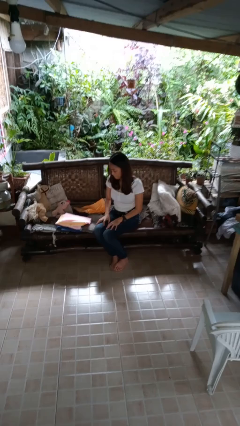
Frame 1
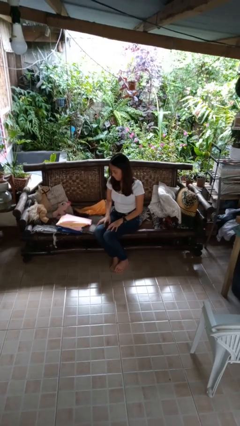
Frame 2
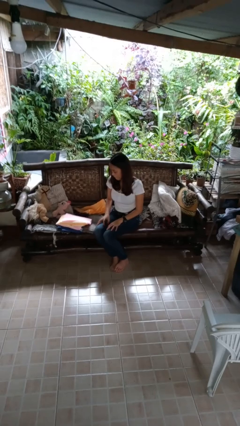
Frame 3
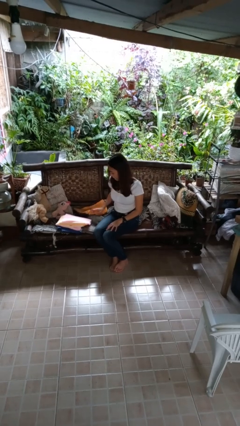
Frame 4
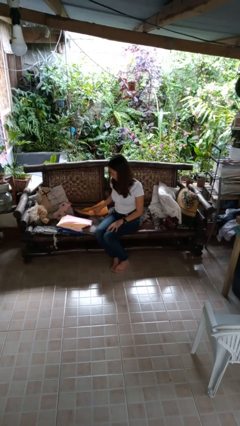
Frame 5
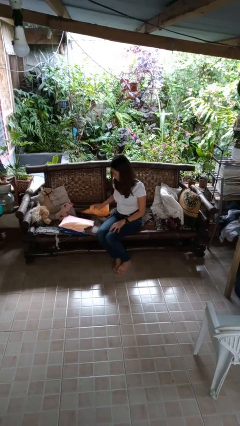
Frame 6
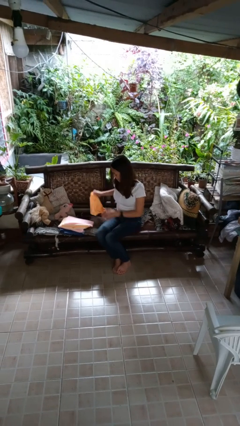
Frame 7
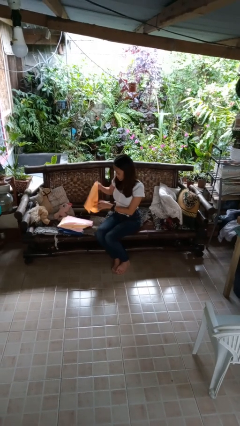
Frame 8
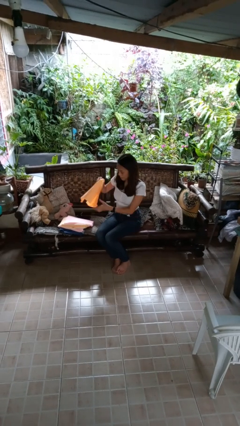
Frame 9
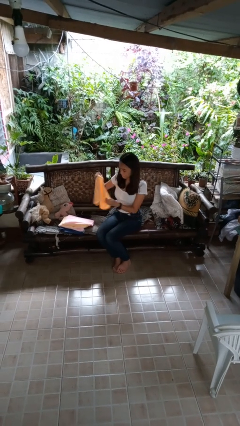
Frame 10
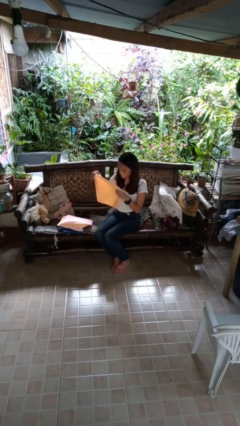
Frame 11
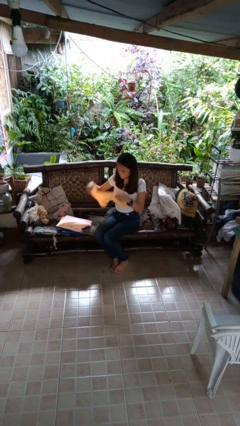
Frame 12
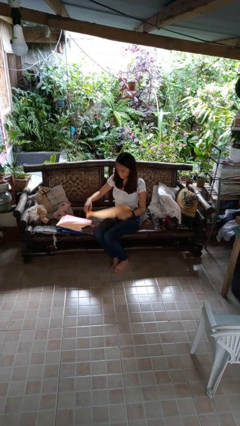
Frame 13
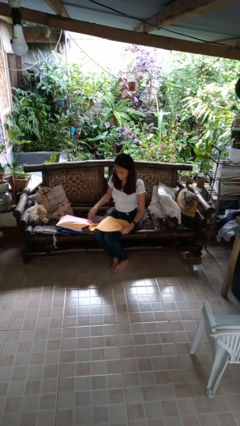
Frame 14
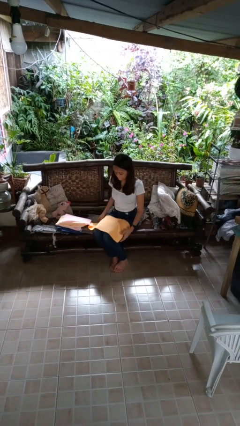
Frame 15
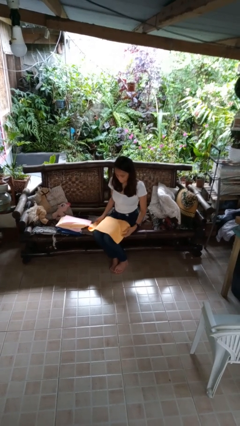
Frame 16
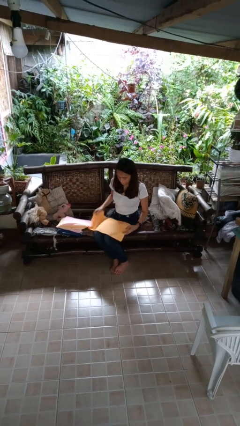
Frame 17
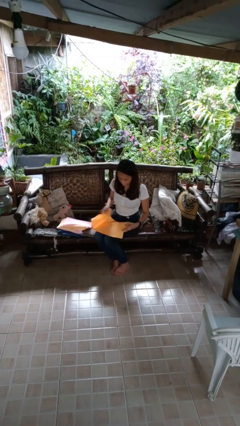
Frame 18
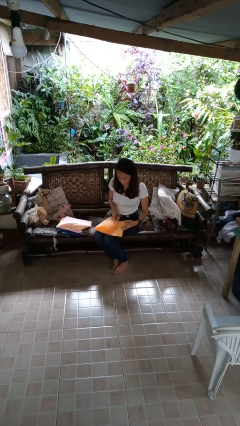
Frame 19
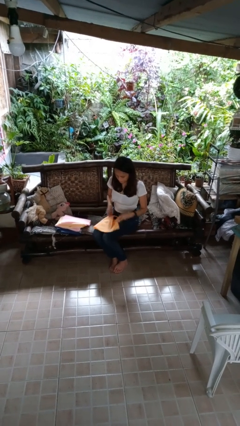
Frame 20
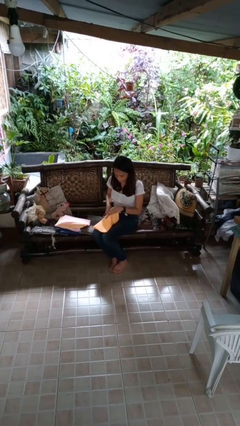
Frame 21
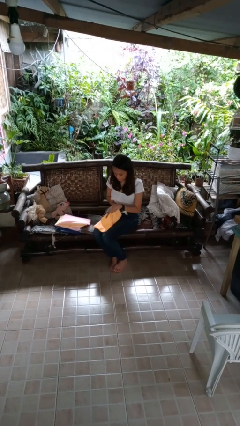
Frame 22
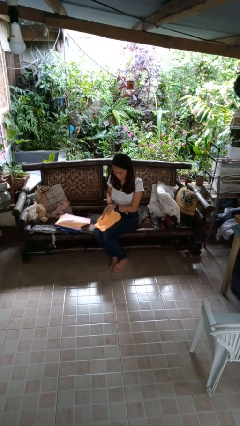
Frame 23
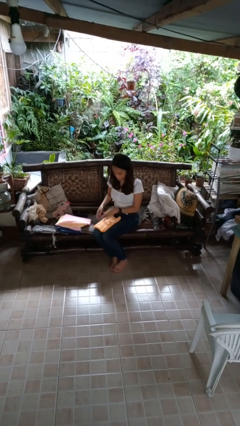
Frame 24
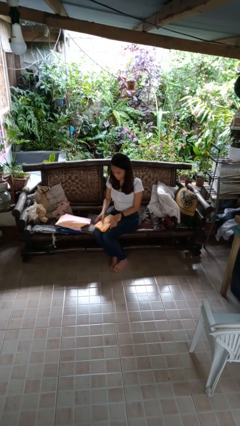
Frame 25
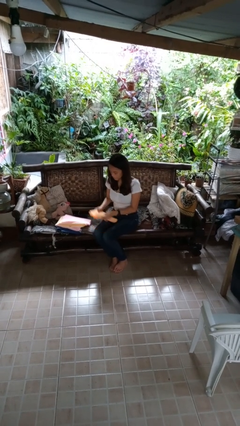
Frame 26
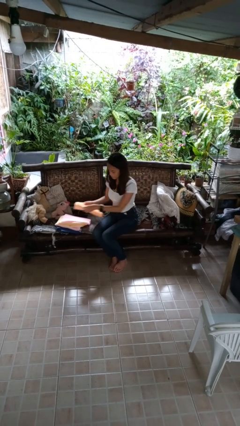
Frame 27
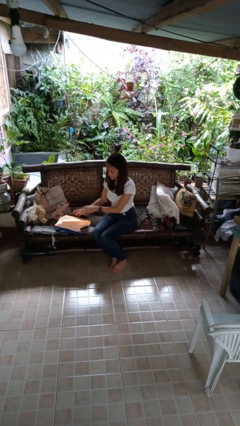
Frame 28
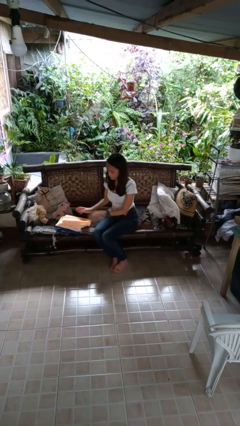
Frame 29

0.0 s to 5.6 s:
person folds towel

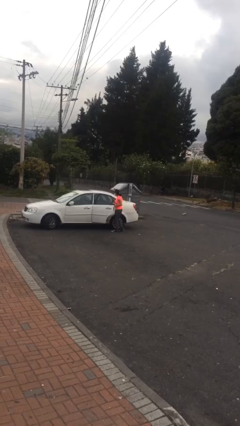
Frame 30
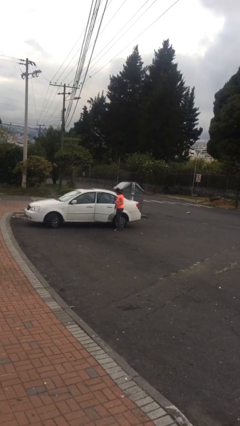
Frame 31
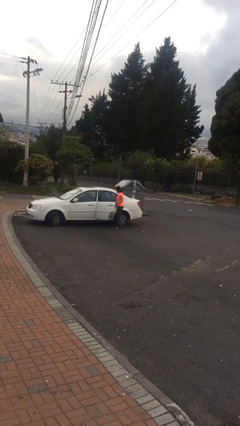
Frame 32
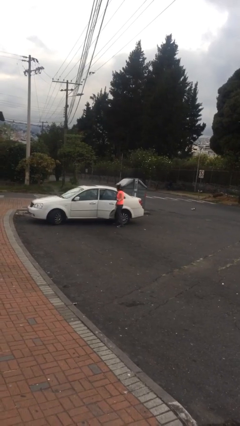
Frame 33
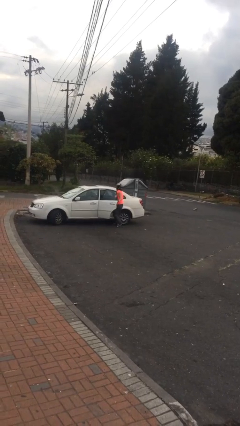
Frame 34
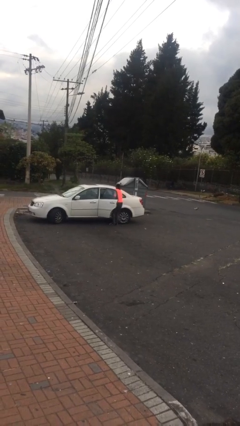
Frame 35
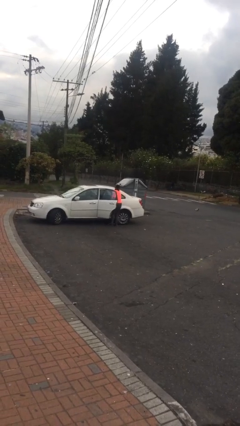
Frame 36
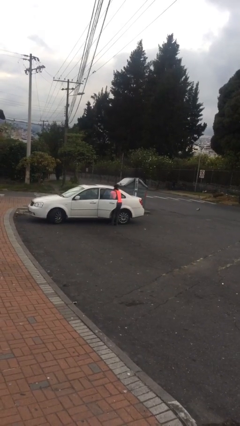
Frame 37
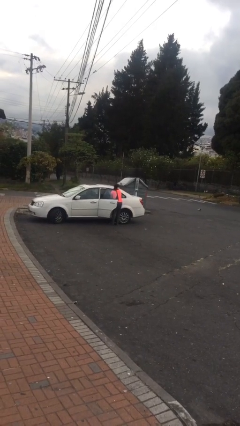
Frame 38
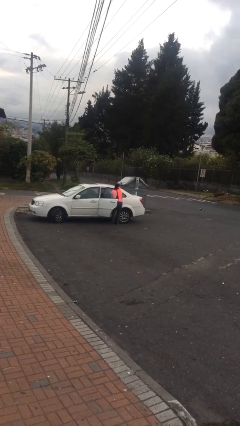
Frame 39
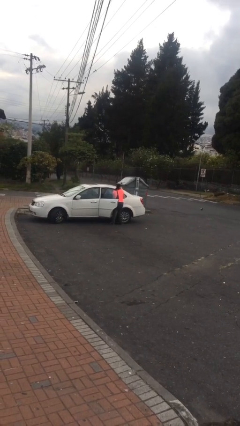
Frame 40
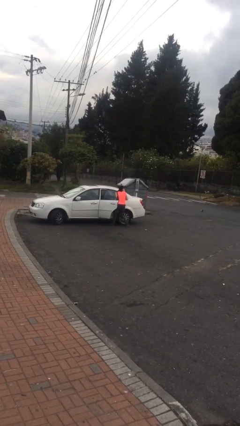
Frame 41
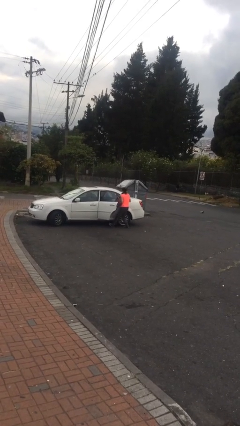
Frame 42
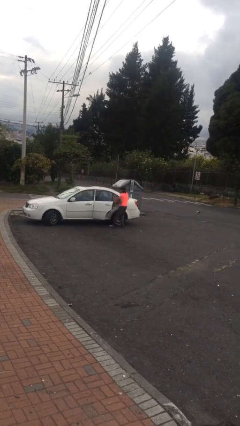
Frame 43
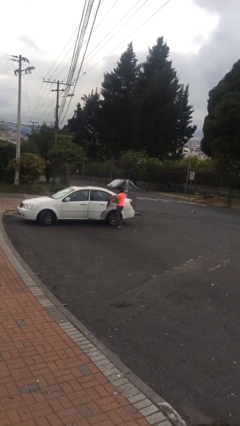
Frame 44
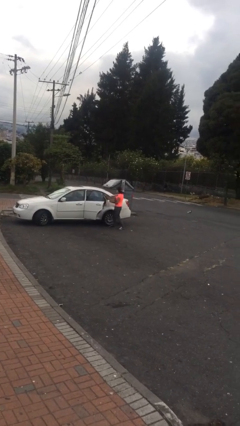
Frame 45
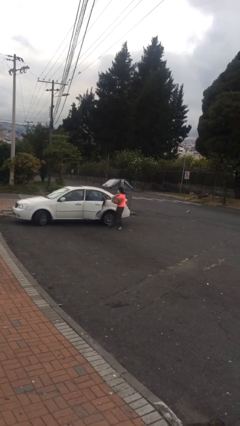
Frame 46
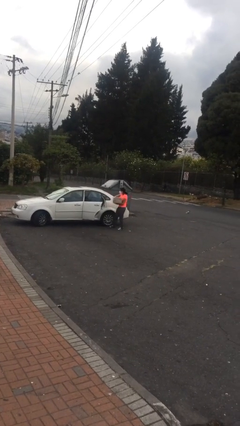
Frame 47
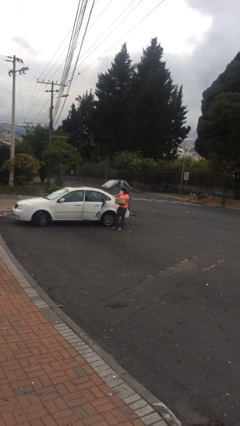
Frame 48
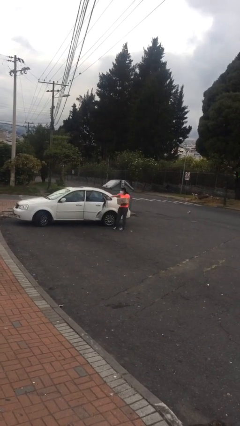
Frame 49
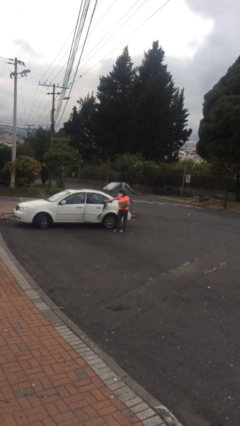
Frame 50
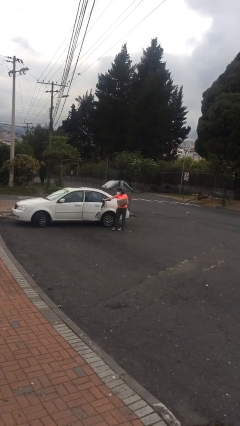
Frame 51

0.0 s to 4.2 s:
person unloads car

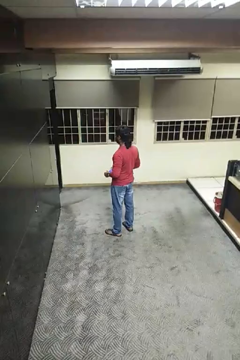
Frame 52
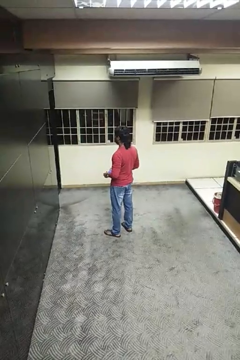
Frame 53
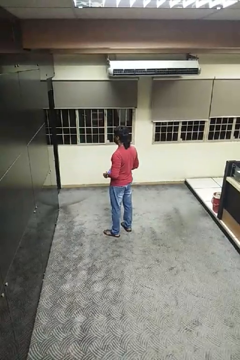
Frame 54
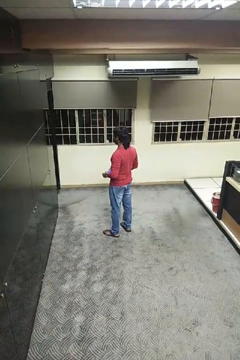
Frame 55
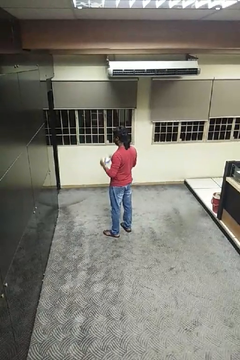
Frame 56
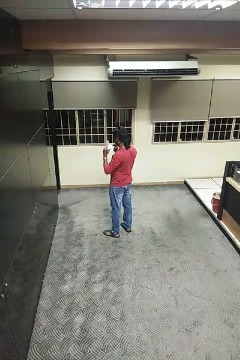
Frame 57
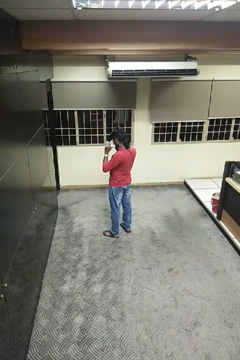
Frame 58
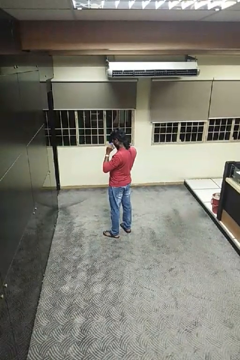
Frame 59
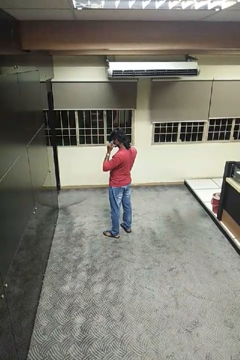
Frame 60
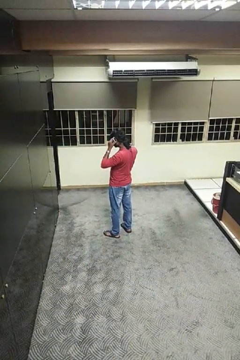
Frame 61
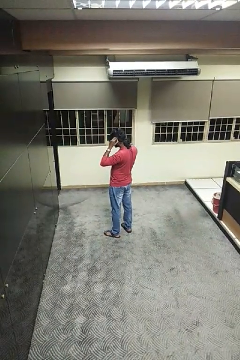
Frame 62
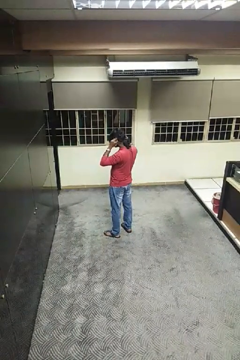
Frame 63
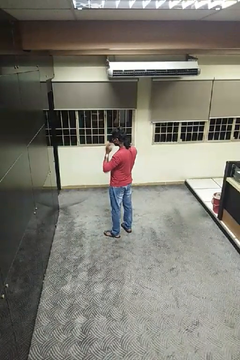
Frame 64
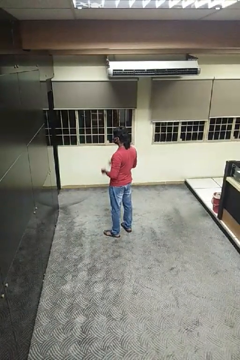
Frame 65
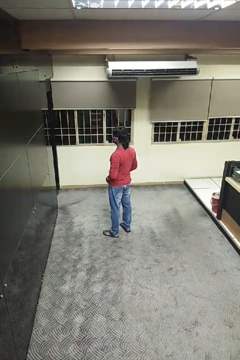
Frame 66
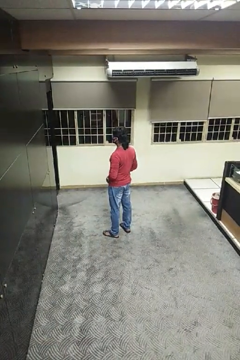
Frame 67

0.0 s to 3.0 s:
person puts on facemask

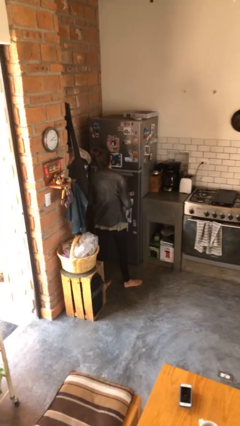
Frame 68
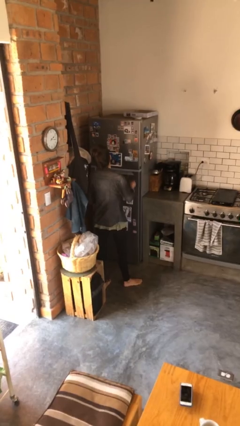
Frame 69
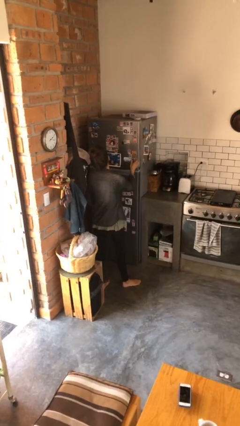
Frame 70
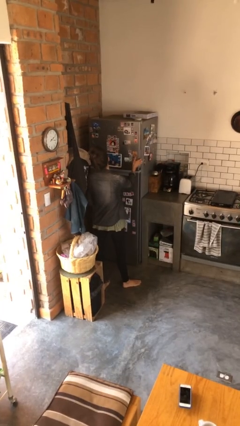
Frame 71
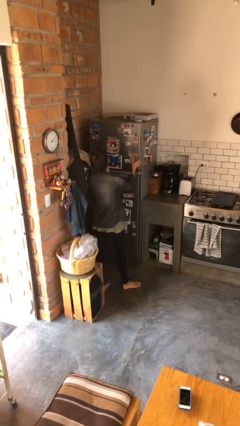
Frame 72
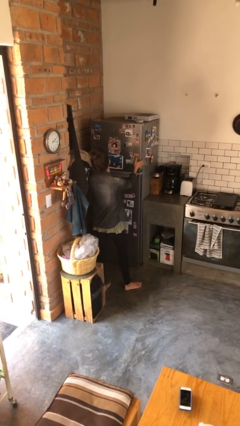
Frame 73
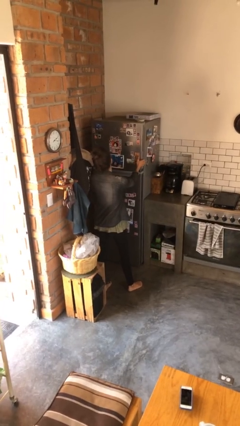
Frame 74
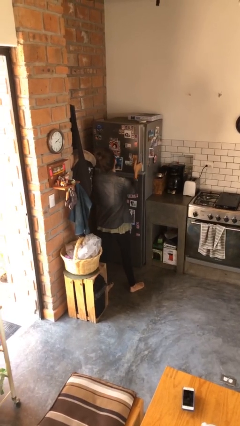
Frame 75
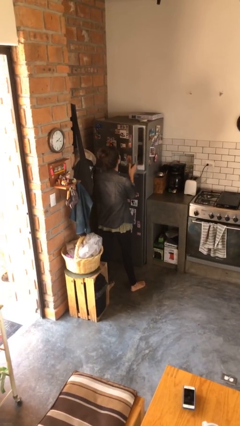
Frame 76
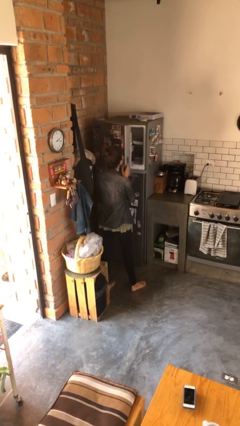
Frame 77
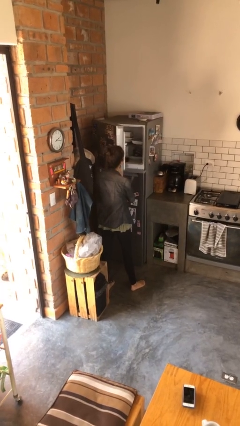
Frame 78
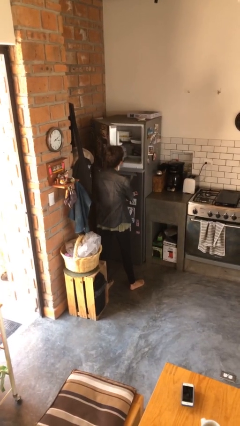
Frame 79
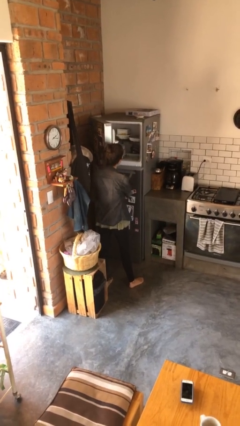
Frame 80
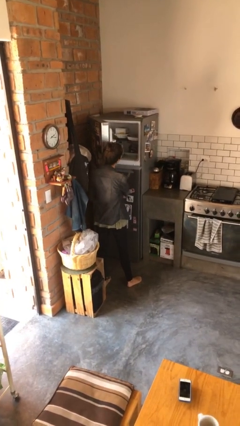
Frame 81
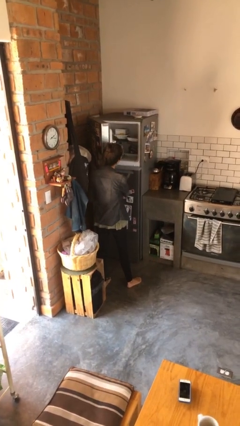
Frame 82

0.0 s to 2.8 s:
person opens refrigerator

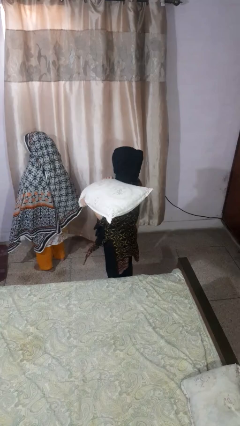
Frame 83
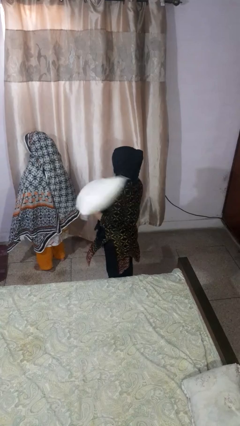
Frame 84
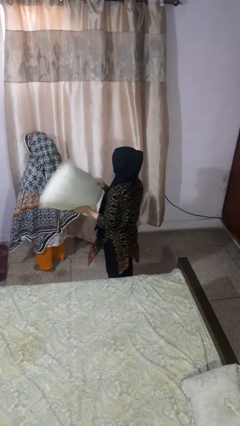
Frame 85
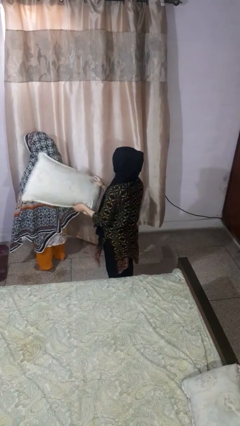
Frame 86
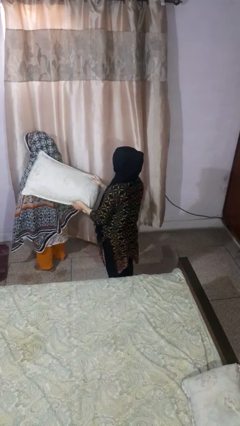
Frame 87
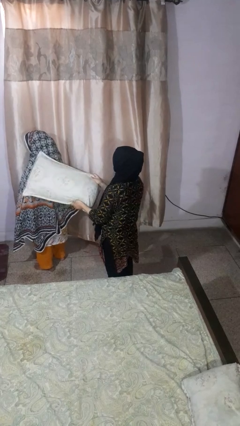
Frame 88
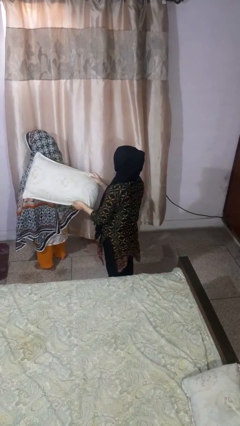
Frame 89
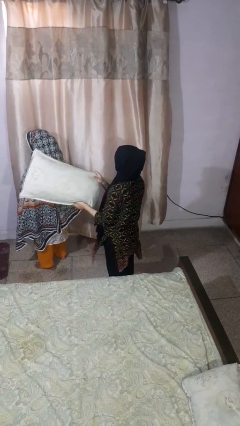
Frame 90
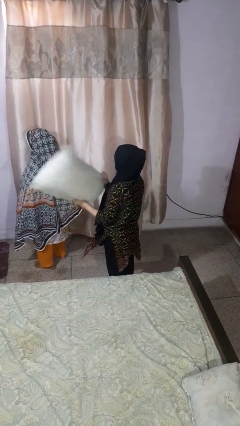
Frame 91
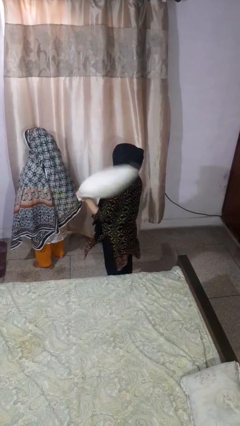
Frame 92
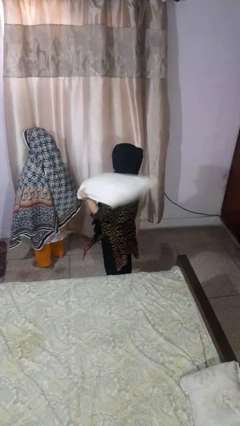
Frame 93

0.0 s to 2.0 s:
person hits person with pillow

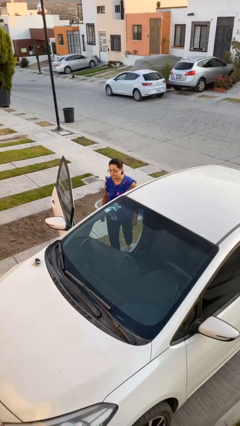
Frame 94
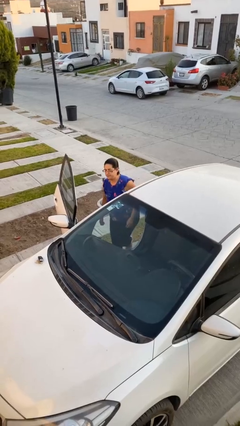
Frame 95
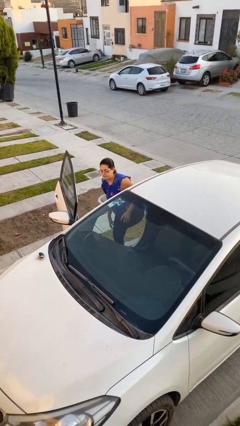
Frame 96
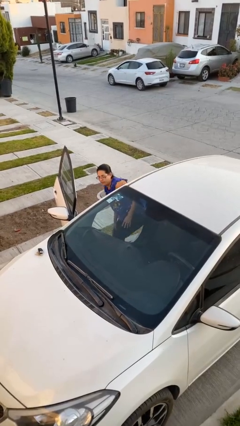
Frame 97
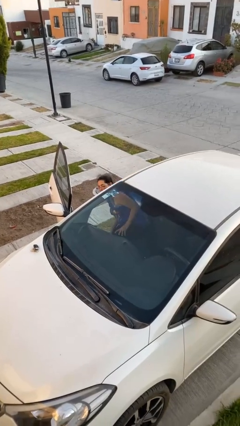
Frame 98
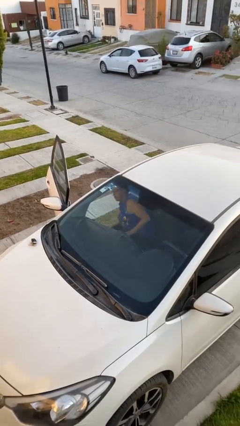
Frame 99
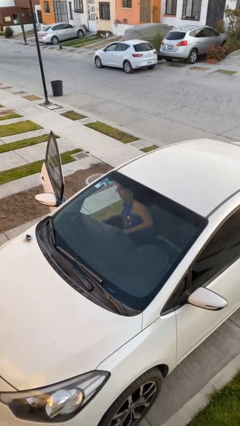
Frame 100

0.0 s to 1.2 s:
person enters car
